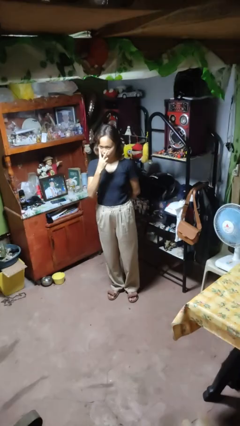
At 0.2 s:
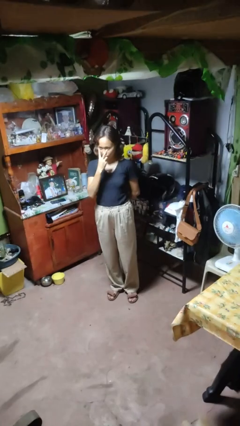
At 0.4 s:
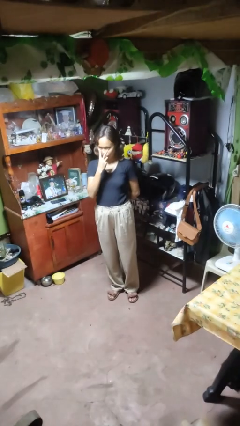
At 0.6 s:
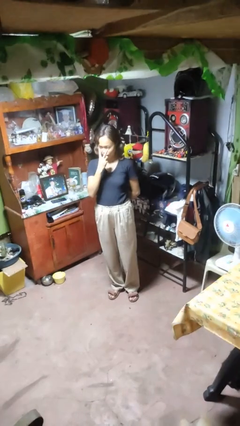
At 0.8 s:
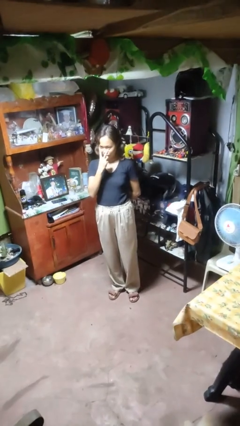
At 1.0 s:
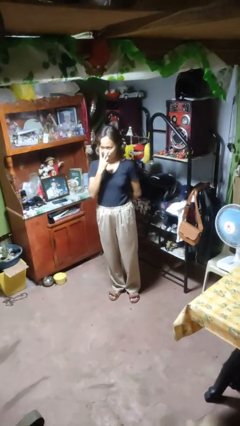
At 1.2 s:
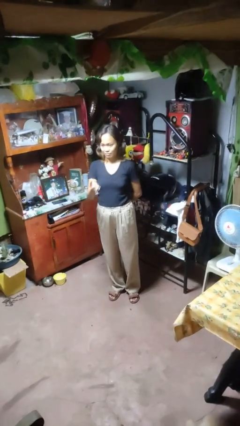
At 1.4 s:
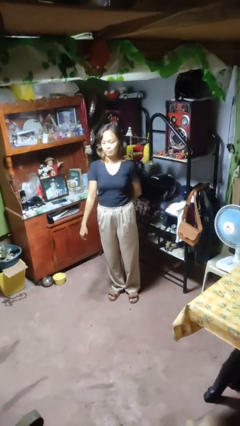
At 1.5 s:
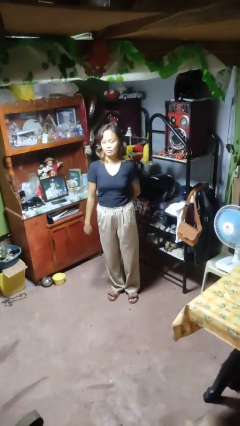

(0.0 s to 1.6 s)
person gestures watch closely

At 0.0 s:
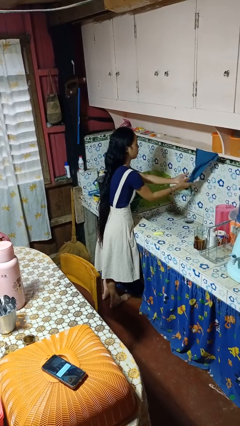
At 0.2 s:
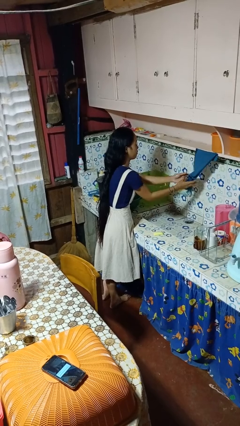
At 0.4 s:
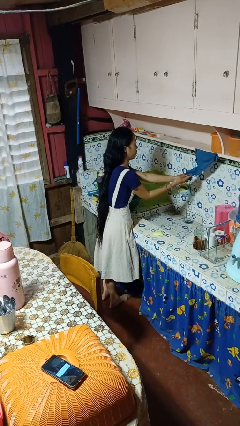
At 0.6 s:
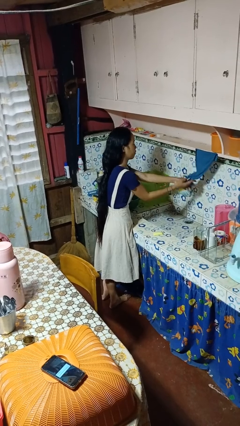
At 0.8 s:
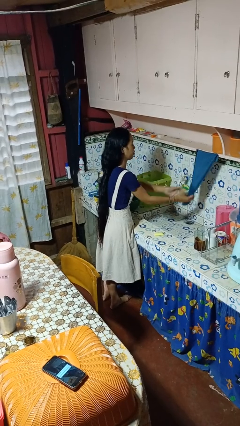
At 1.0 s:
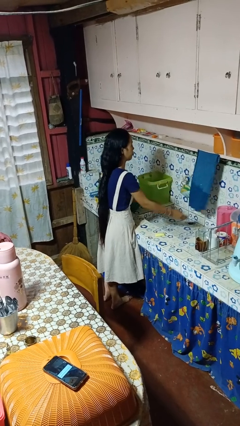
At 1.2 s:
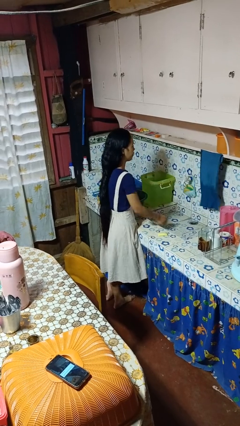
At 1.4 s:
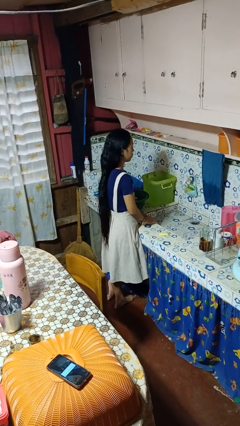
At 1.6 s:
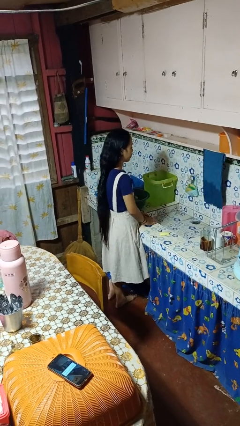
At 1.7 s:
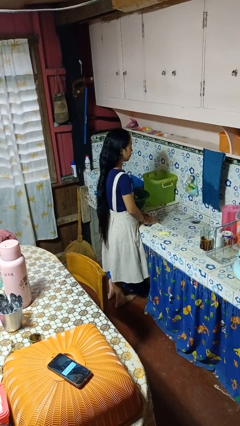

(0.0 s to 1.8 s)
person dries hands with towel

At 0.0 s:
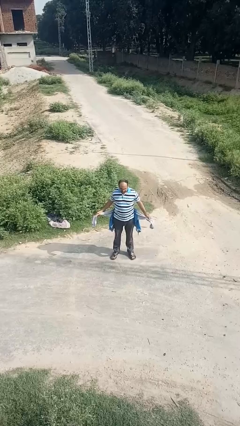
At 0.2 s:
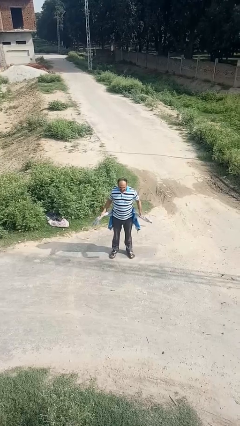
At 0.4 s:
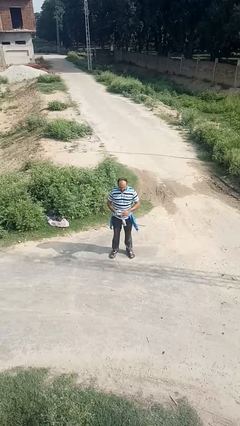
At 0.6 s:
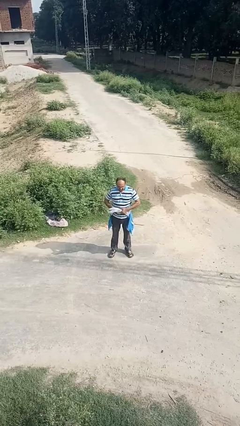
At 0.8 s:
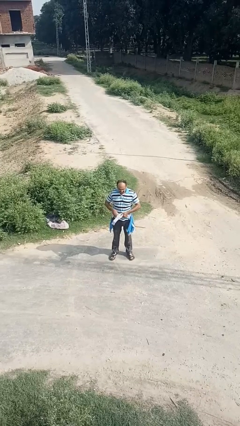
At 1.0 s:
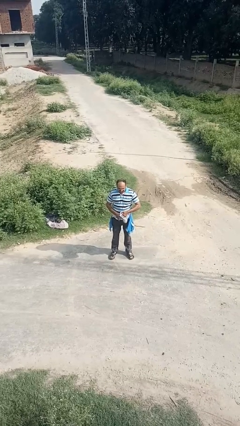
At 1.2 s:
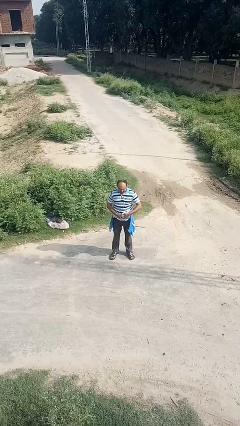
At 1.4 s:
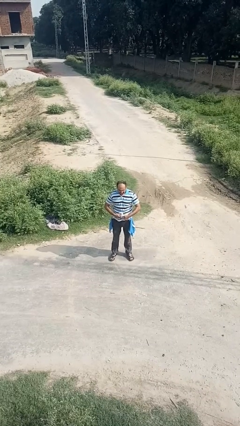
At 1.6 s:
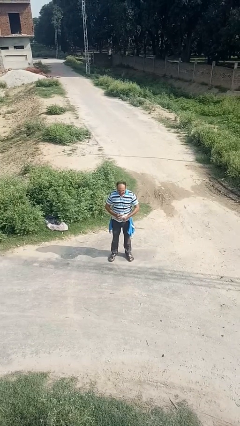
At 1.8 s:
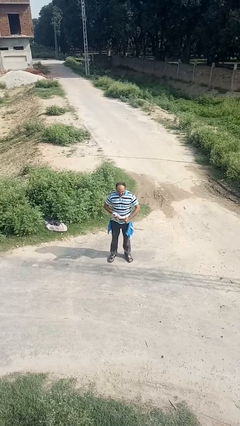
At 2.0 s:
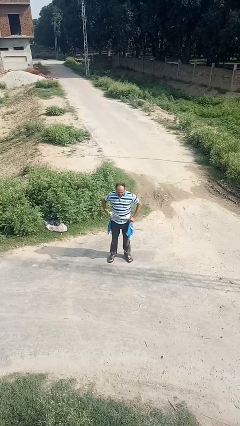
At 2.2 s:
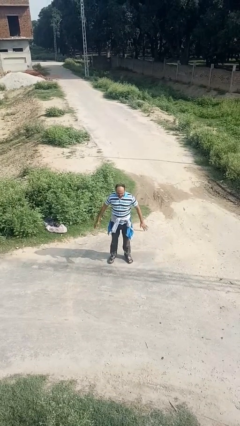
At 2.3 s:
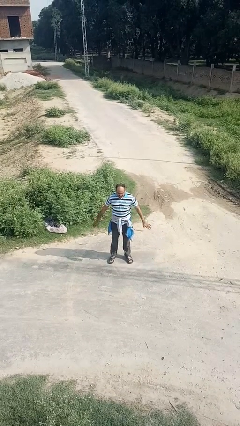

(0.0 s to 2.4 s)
person ties jacket around waist

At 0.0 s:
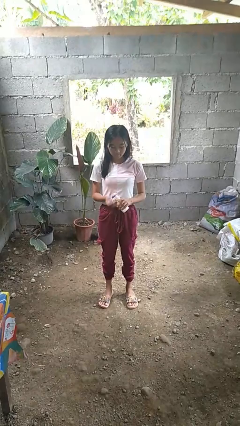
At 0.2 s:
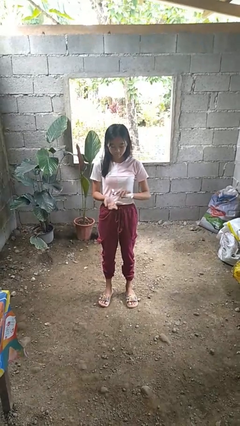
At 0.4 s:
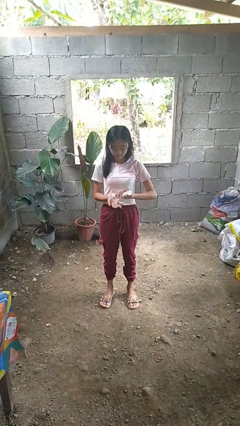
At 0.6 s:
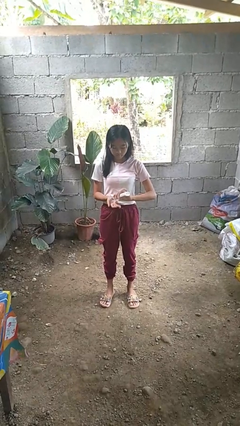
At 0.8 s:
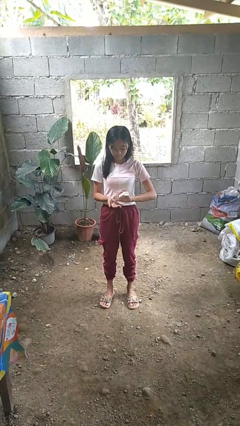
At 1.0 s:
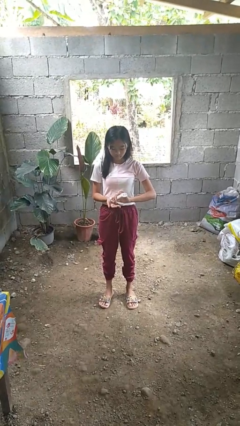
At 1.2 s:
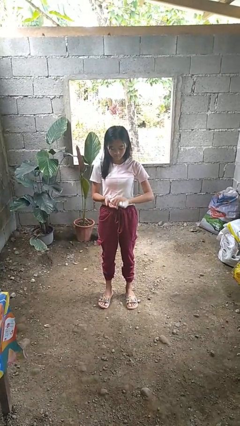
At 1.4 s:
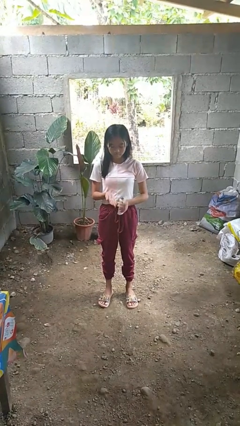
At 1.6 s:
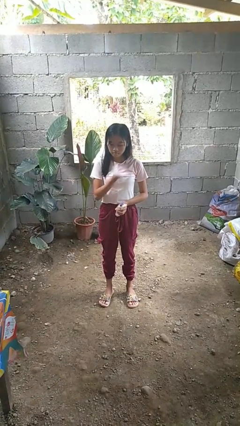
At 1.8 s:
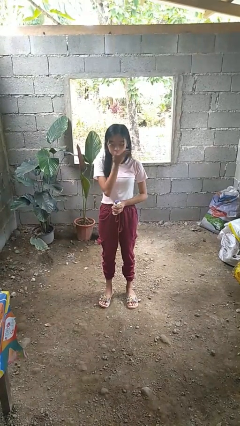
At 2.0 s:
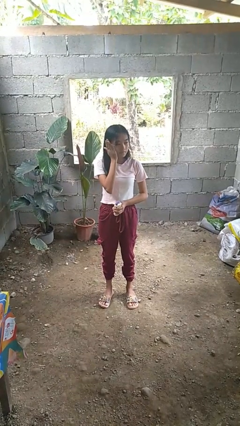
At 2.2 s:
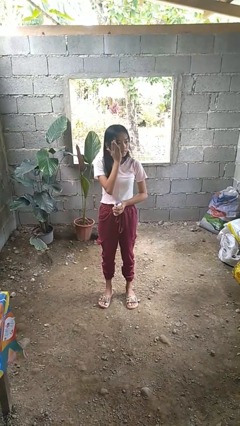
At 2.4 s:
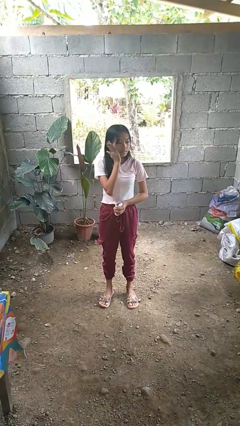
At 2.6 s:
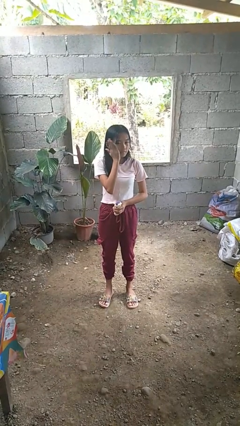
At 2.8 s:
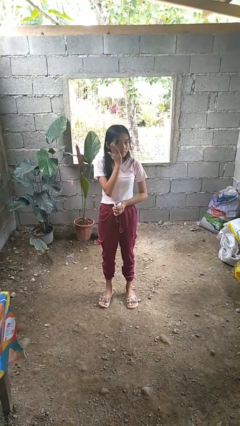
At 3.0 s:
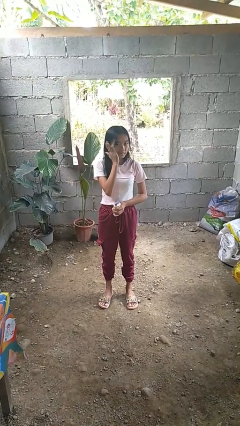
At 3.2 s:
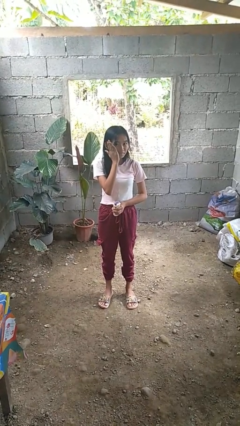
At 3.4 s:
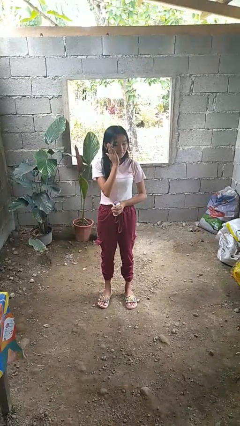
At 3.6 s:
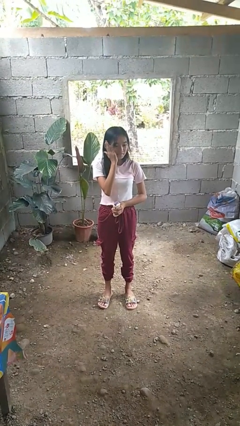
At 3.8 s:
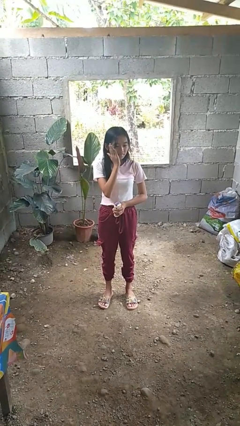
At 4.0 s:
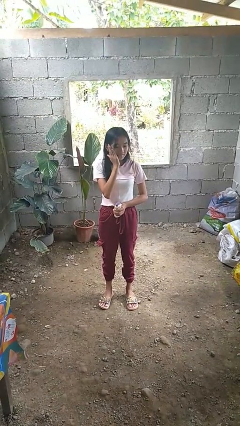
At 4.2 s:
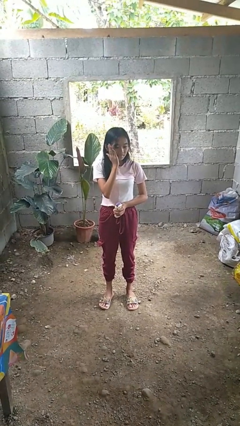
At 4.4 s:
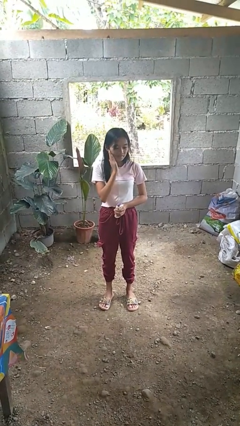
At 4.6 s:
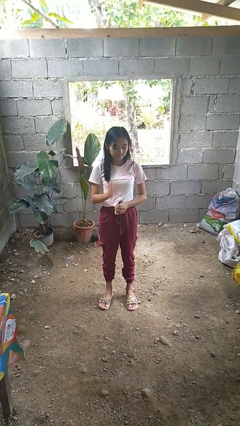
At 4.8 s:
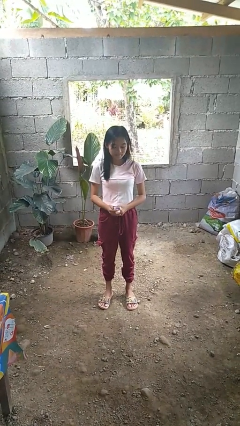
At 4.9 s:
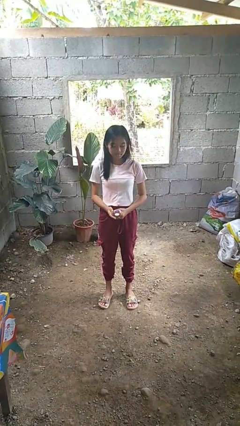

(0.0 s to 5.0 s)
person applies sunscreen

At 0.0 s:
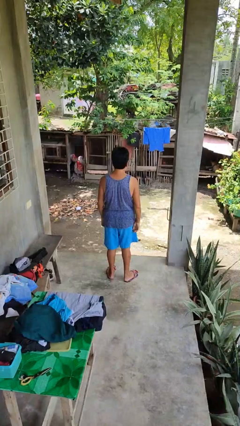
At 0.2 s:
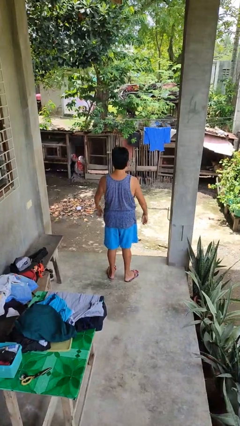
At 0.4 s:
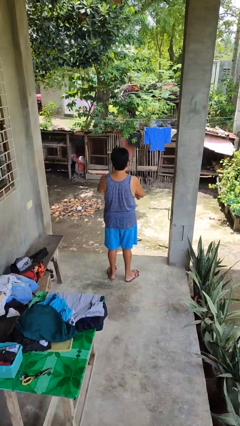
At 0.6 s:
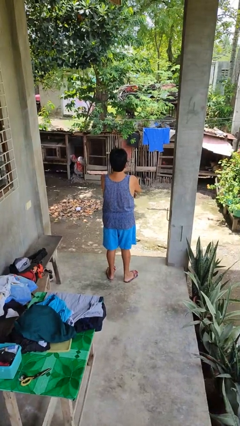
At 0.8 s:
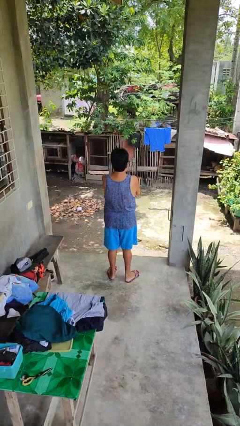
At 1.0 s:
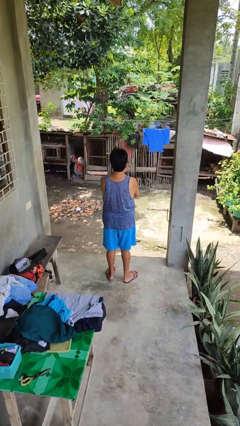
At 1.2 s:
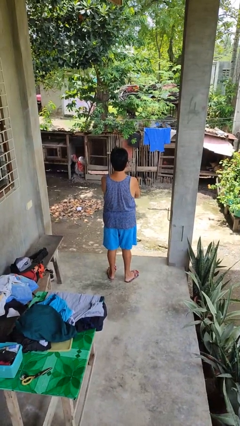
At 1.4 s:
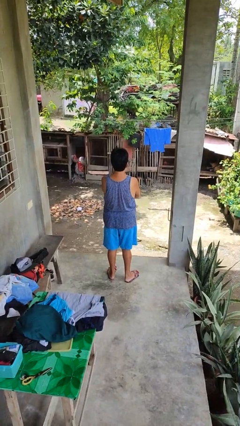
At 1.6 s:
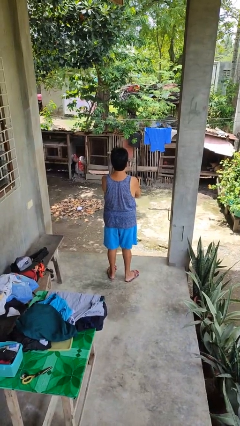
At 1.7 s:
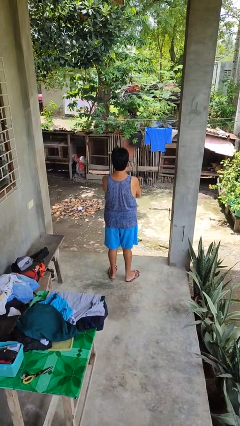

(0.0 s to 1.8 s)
person crosses arms

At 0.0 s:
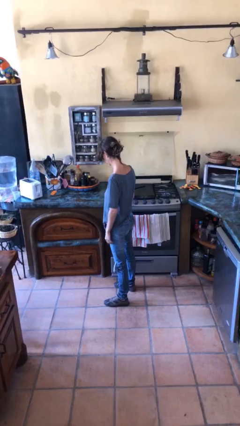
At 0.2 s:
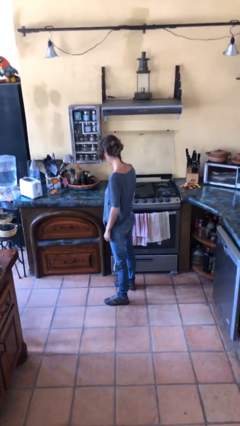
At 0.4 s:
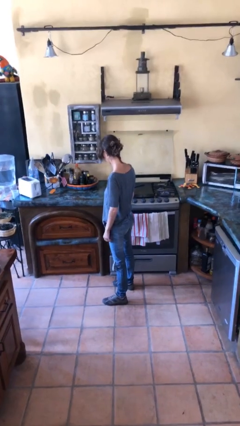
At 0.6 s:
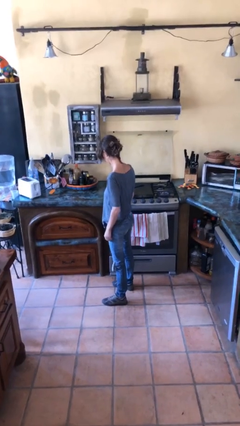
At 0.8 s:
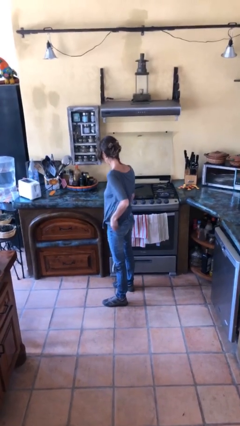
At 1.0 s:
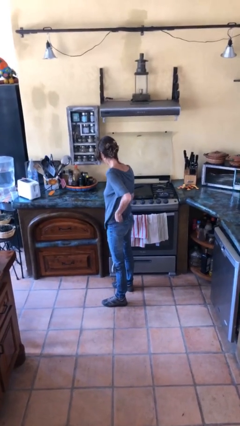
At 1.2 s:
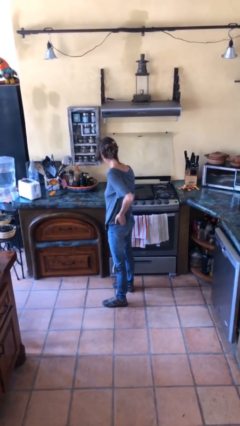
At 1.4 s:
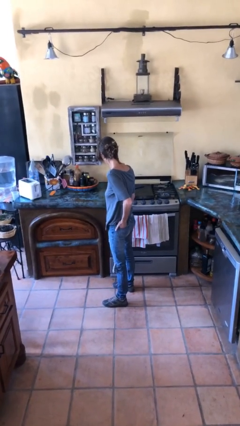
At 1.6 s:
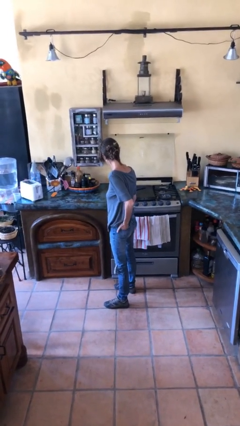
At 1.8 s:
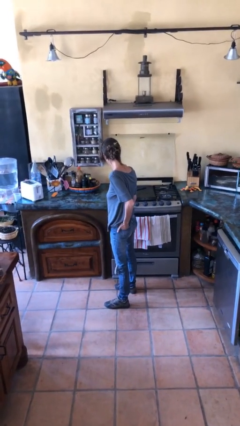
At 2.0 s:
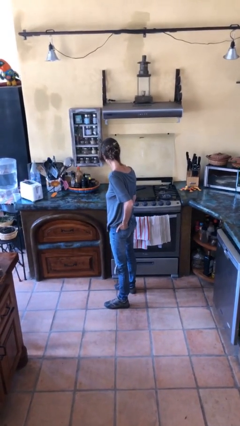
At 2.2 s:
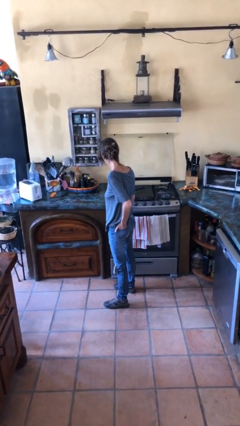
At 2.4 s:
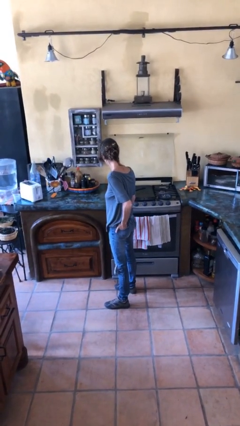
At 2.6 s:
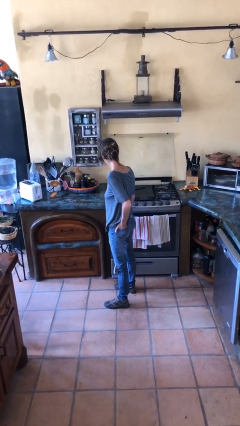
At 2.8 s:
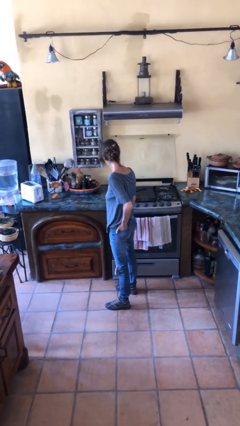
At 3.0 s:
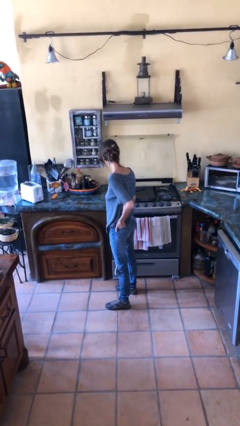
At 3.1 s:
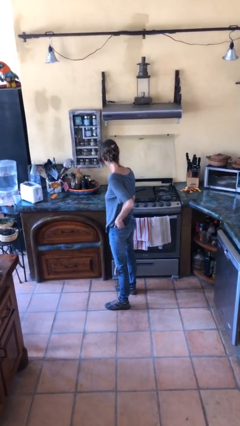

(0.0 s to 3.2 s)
person puts hands in back pockets

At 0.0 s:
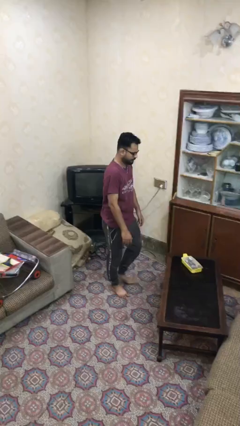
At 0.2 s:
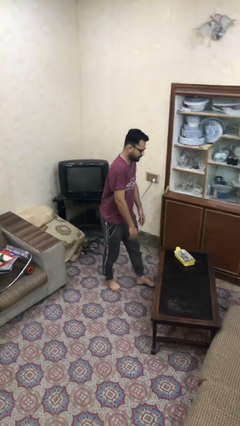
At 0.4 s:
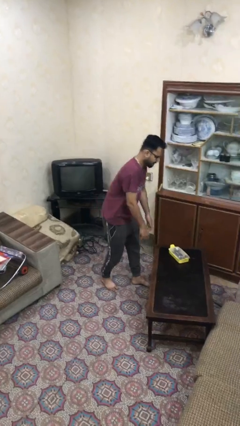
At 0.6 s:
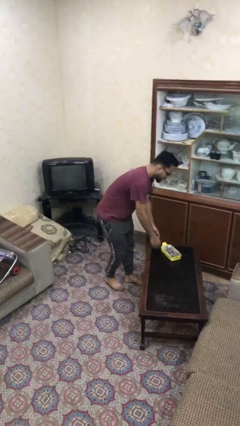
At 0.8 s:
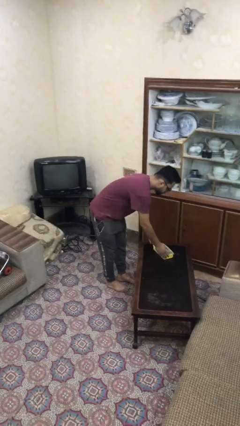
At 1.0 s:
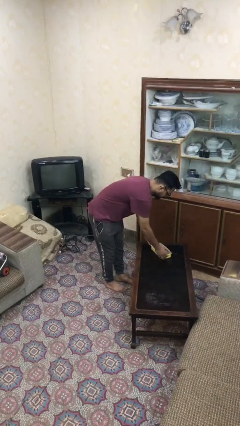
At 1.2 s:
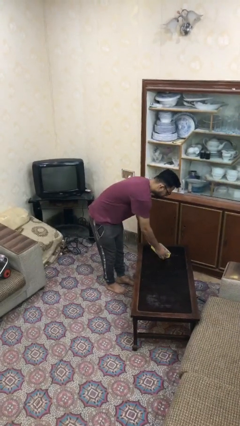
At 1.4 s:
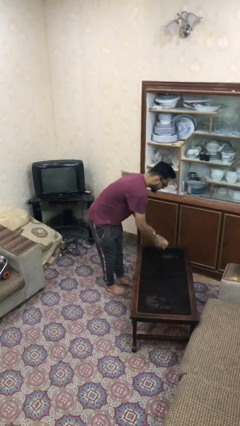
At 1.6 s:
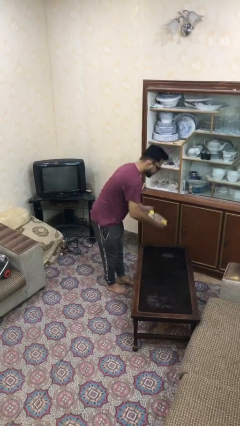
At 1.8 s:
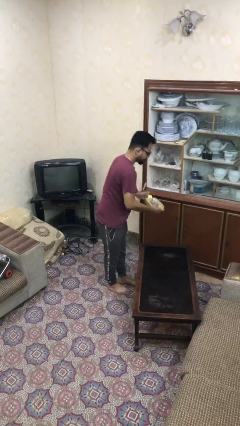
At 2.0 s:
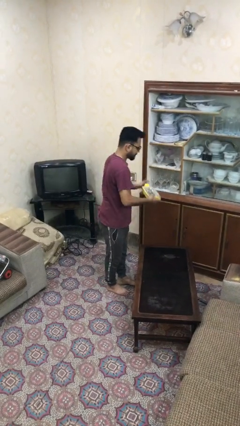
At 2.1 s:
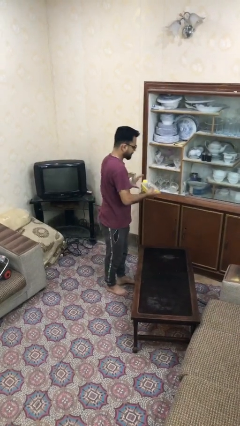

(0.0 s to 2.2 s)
person picks up object from table
